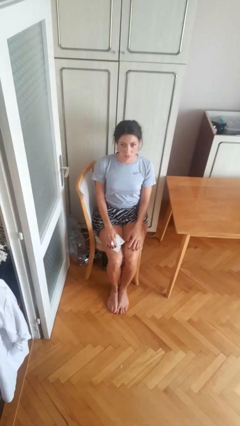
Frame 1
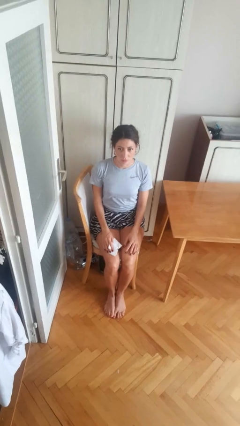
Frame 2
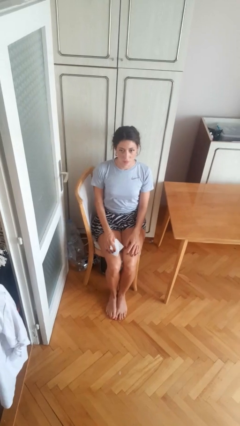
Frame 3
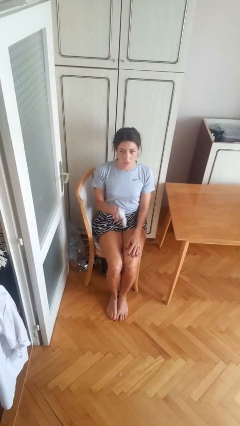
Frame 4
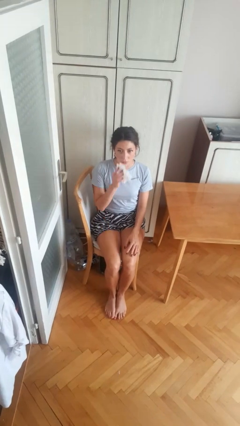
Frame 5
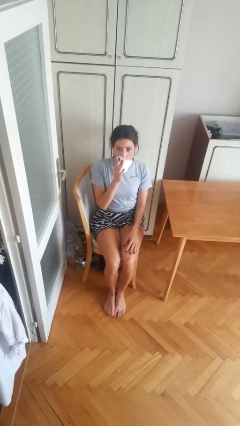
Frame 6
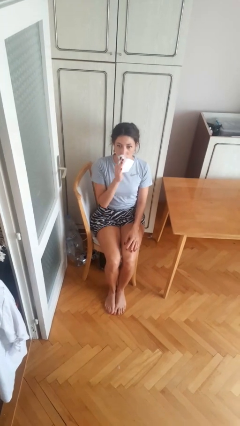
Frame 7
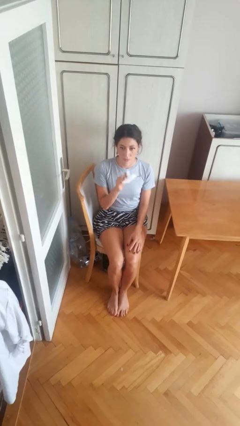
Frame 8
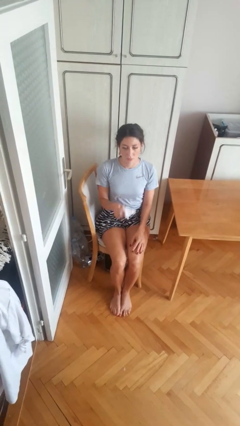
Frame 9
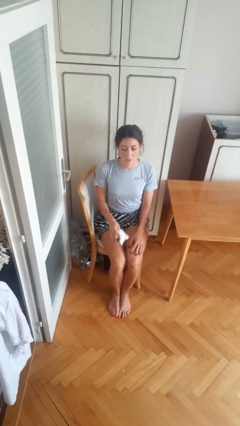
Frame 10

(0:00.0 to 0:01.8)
person wipes mouth with napkin

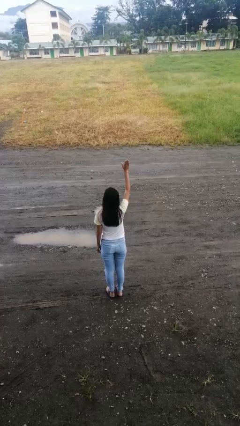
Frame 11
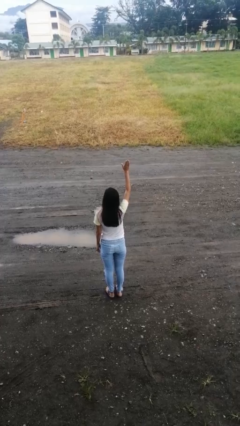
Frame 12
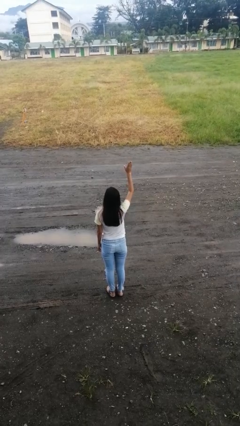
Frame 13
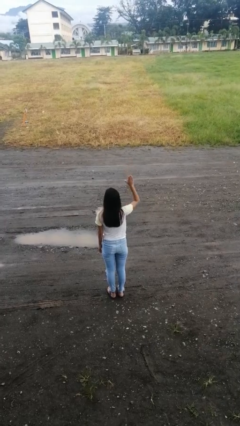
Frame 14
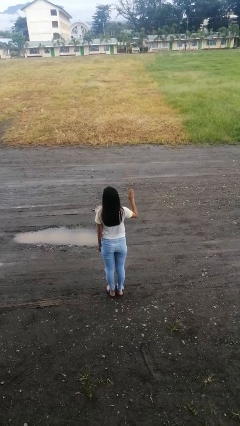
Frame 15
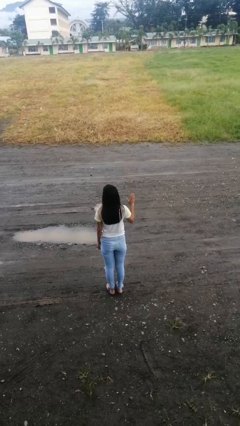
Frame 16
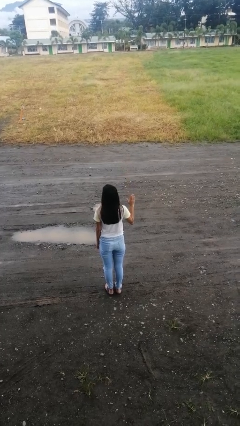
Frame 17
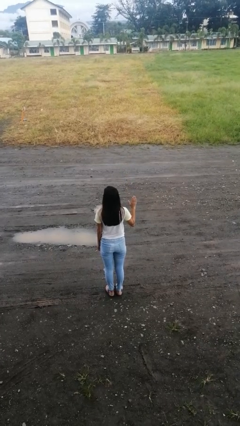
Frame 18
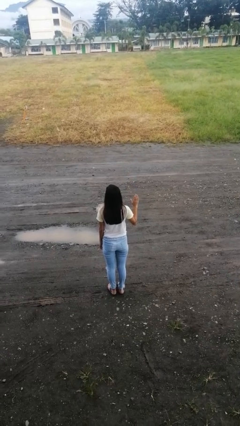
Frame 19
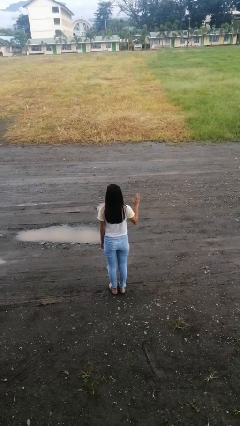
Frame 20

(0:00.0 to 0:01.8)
person gestures lower hand

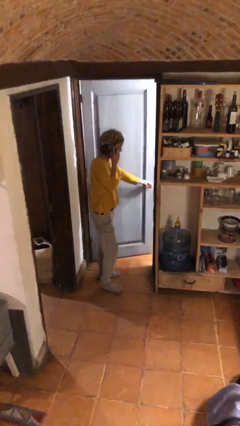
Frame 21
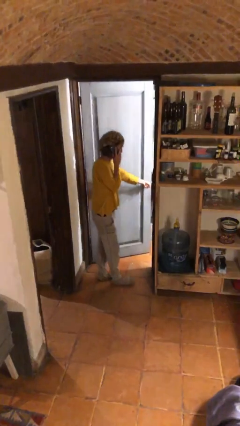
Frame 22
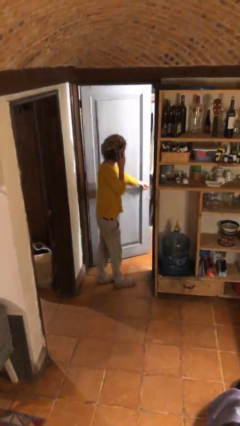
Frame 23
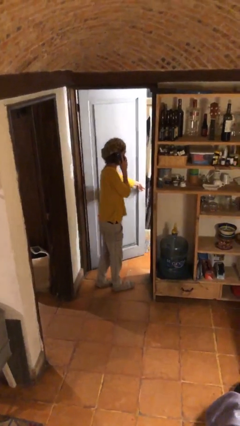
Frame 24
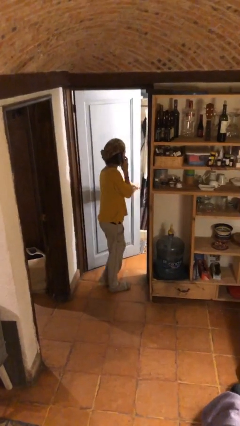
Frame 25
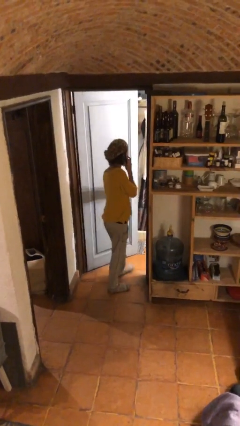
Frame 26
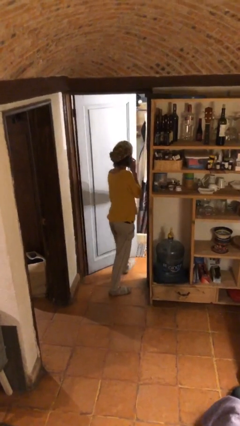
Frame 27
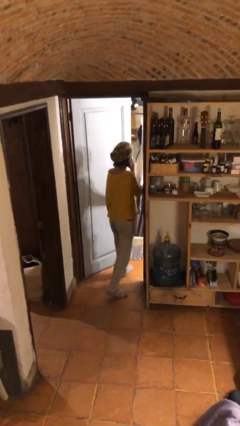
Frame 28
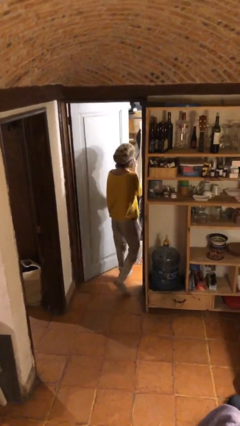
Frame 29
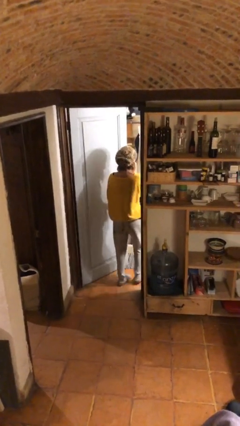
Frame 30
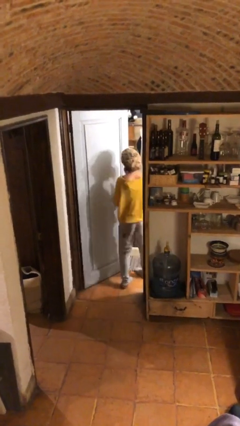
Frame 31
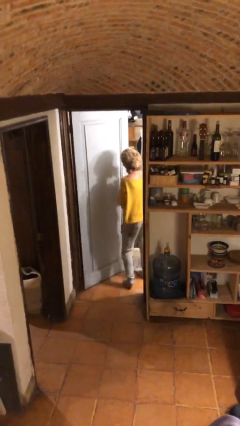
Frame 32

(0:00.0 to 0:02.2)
person exits scene through structure

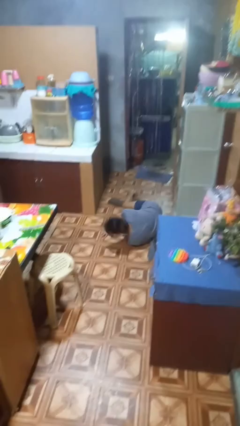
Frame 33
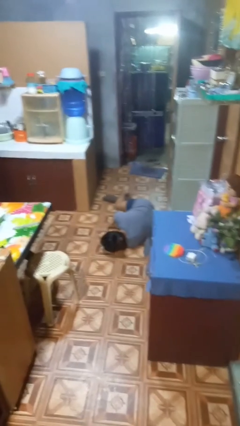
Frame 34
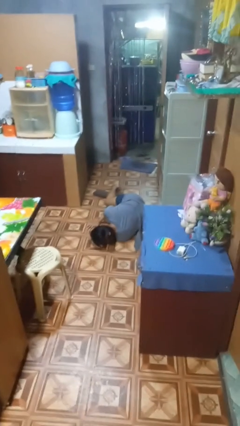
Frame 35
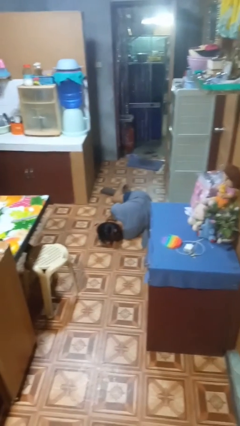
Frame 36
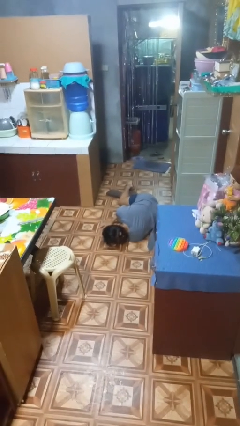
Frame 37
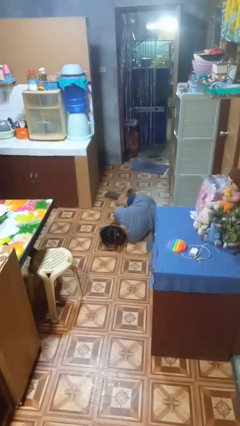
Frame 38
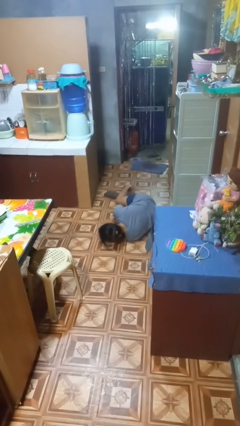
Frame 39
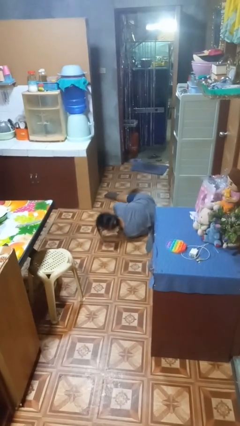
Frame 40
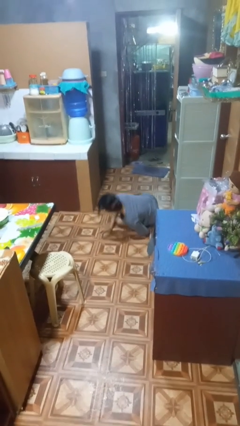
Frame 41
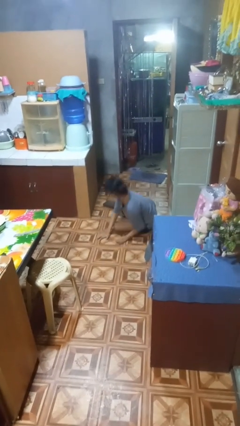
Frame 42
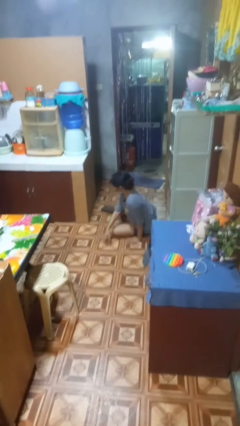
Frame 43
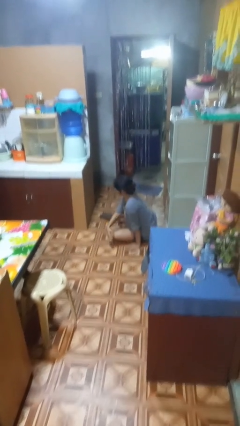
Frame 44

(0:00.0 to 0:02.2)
person lies down on floor

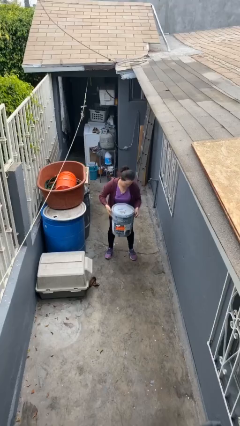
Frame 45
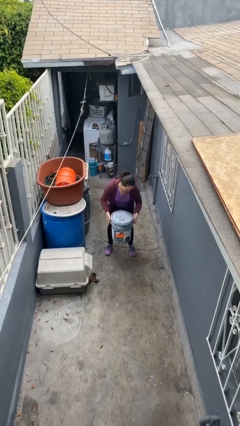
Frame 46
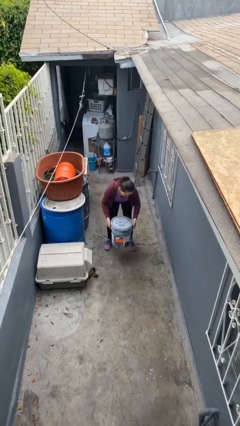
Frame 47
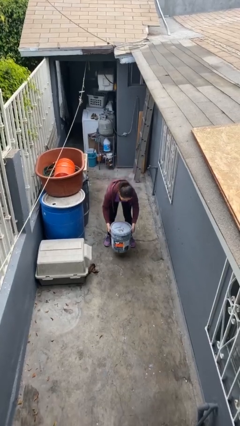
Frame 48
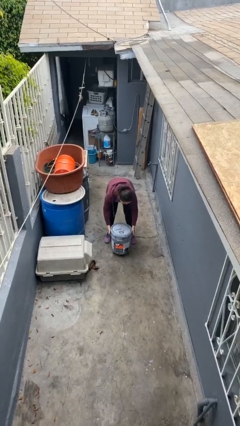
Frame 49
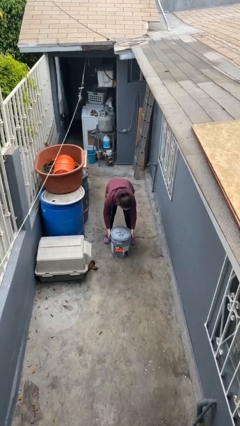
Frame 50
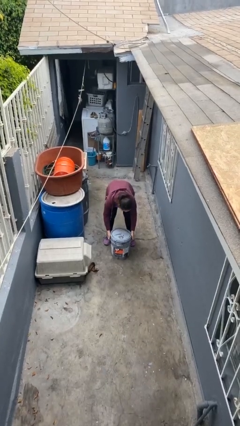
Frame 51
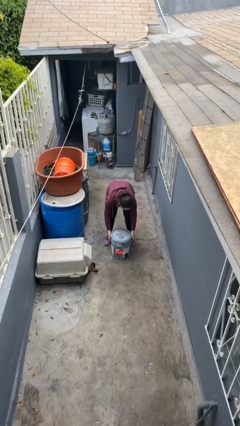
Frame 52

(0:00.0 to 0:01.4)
person puts down object on floor

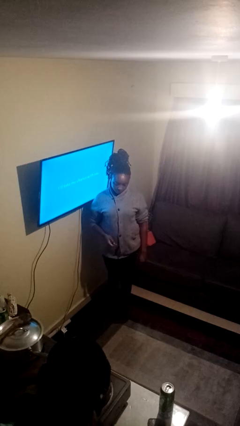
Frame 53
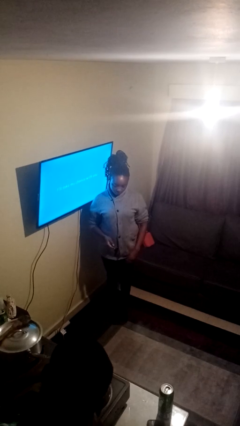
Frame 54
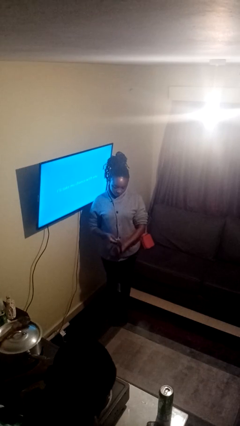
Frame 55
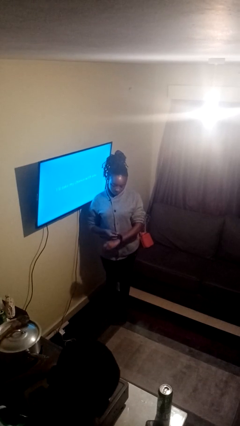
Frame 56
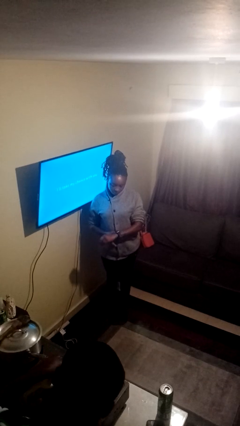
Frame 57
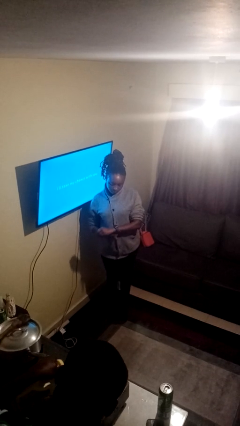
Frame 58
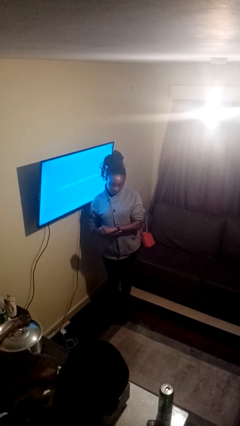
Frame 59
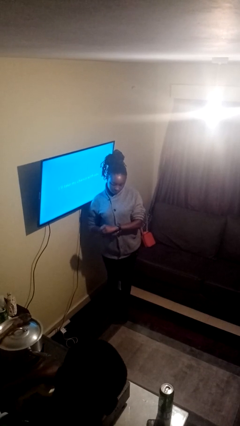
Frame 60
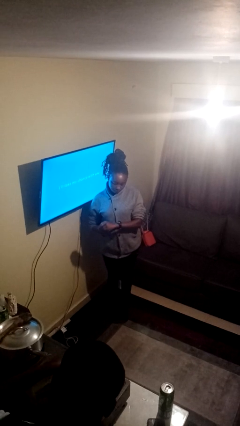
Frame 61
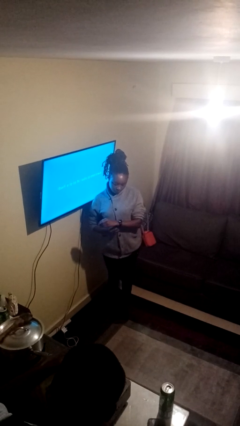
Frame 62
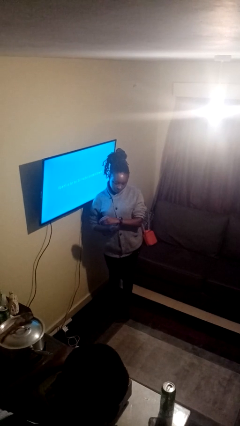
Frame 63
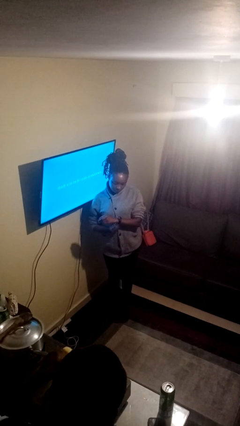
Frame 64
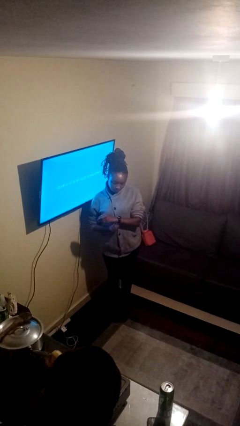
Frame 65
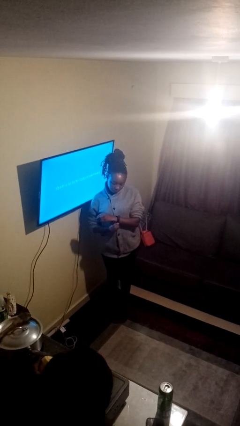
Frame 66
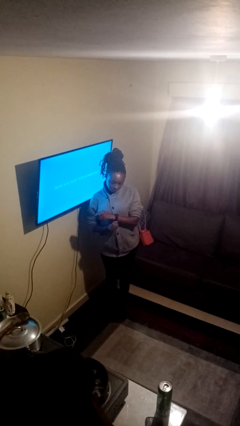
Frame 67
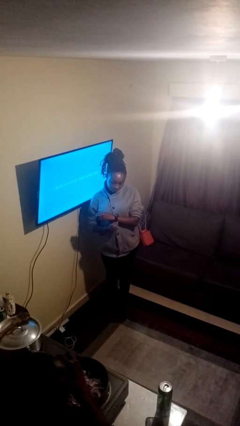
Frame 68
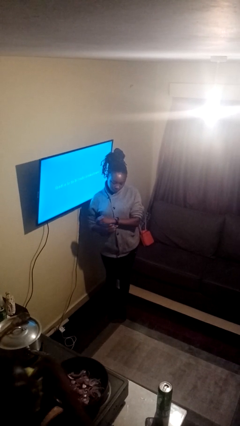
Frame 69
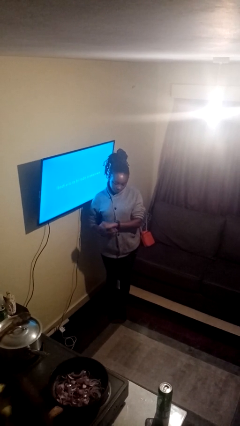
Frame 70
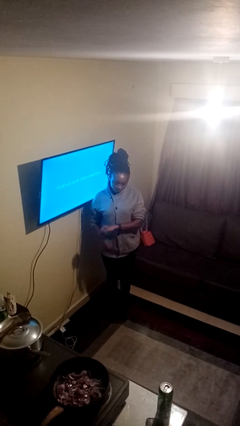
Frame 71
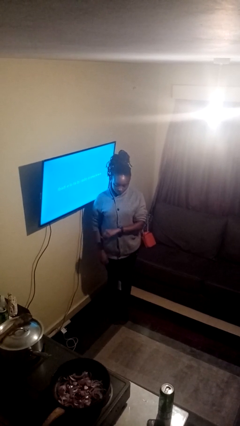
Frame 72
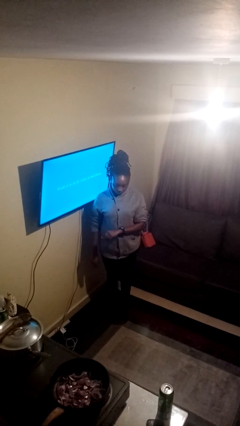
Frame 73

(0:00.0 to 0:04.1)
person puts on wristwatch

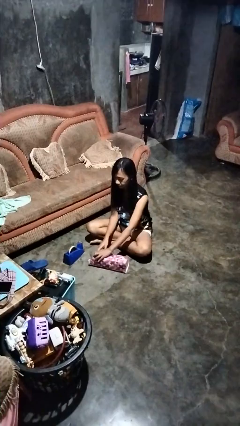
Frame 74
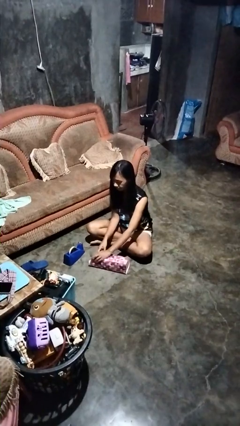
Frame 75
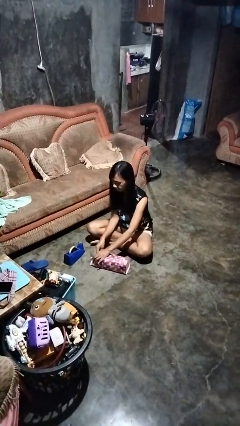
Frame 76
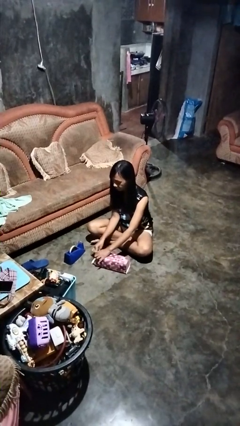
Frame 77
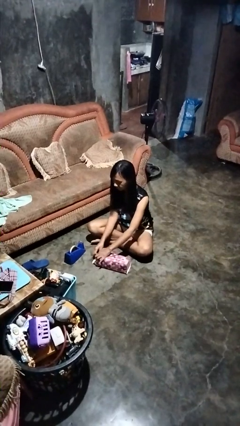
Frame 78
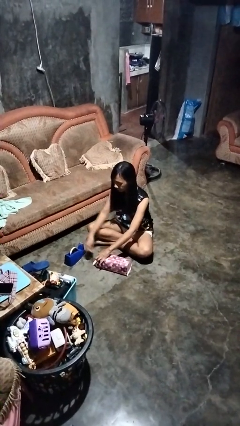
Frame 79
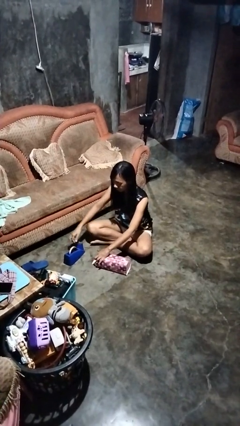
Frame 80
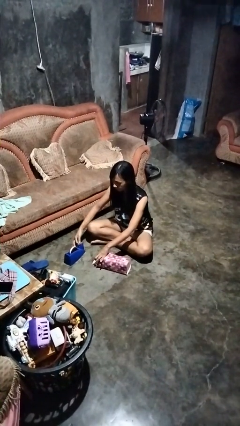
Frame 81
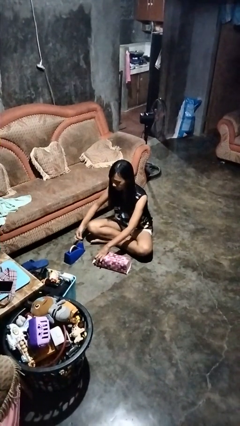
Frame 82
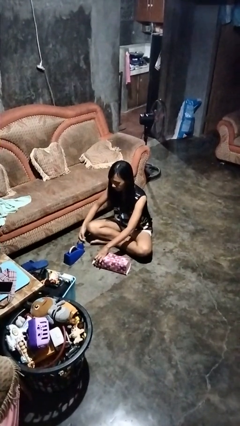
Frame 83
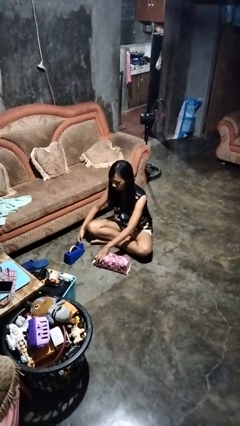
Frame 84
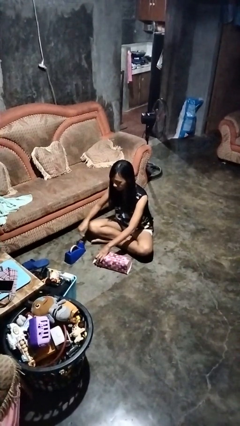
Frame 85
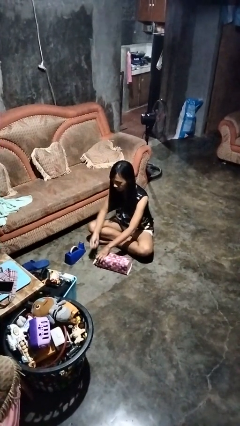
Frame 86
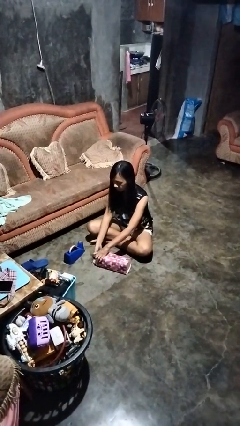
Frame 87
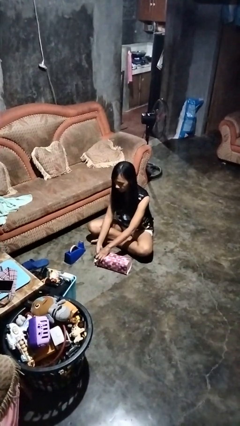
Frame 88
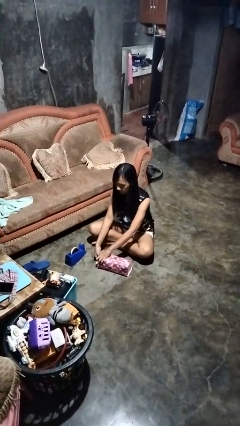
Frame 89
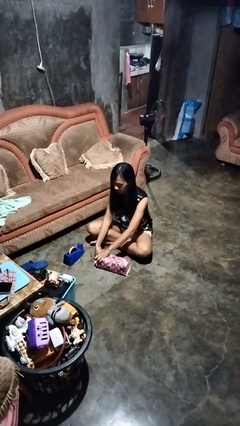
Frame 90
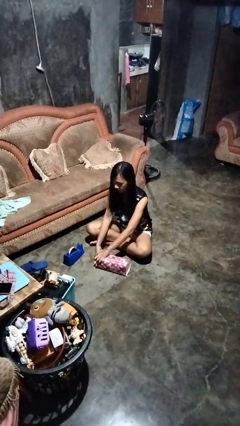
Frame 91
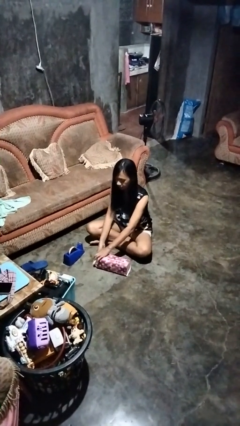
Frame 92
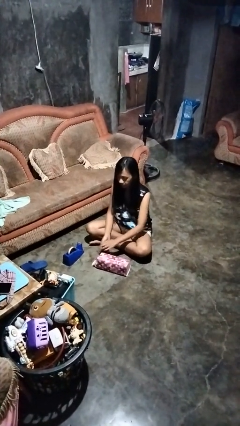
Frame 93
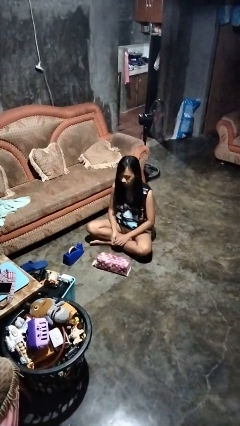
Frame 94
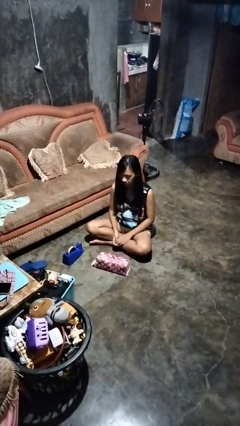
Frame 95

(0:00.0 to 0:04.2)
person wraps box
